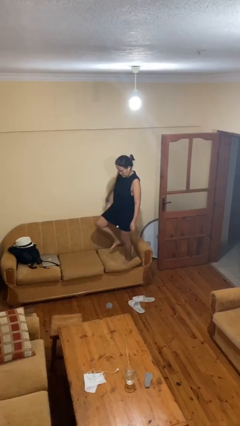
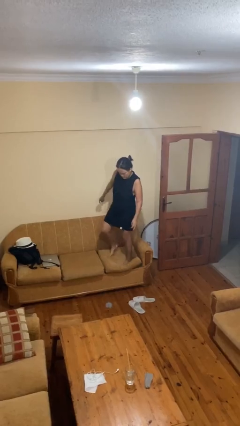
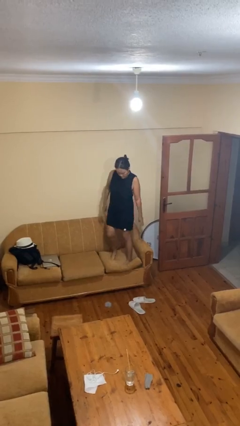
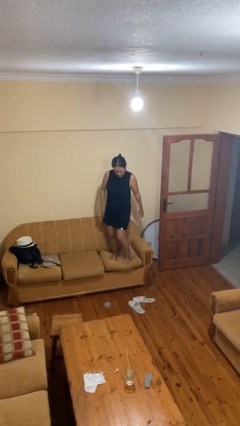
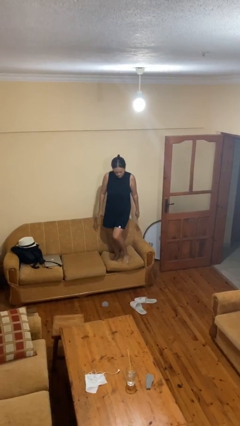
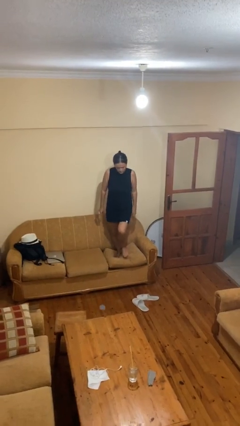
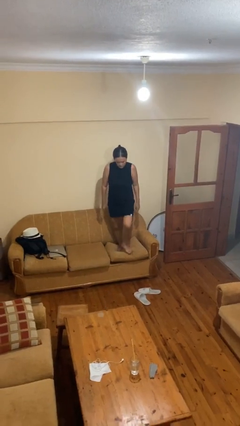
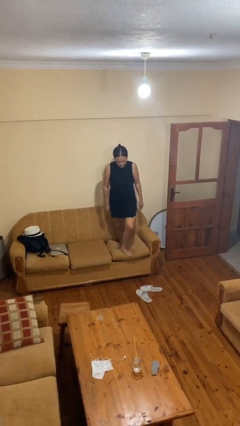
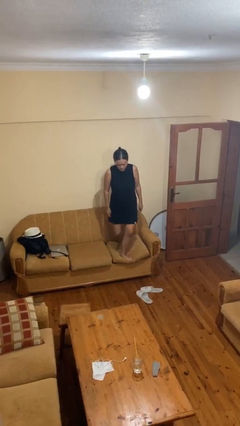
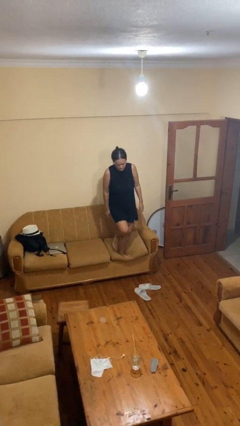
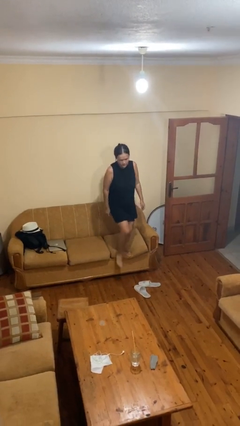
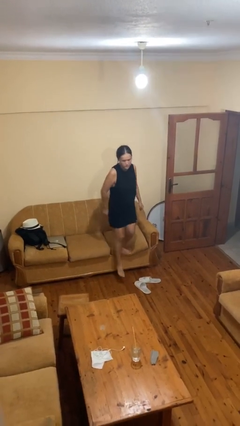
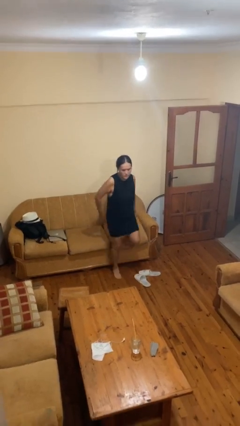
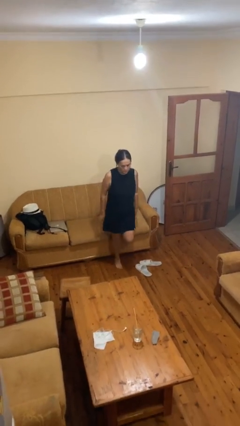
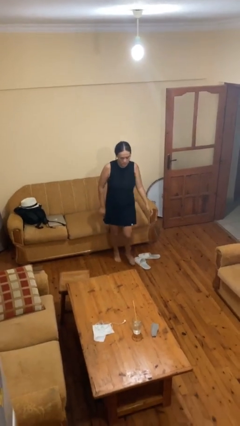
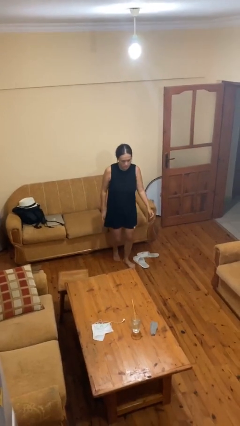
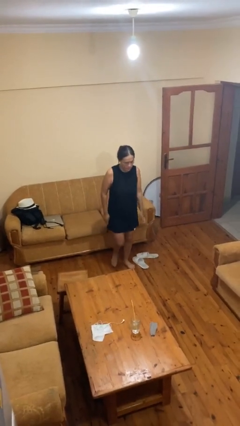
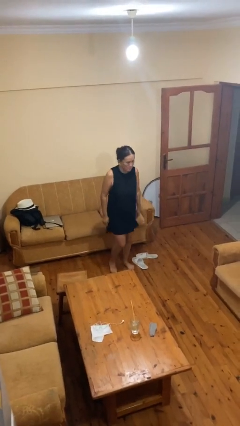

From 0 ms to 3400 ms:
person climbs off couch

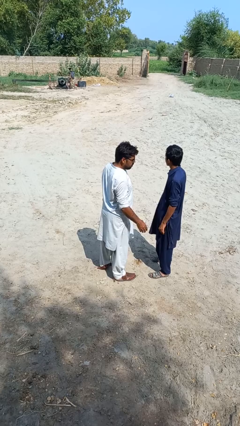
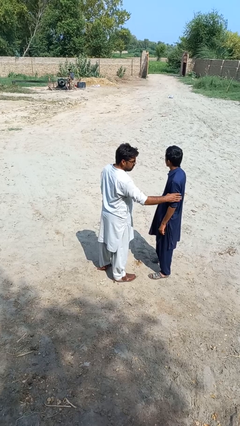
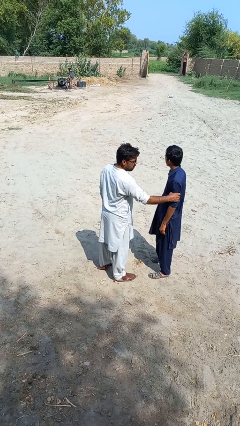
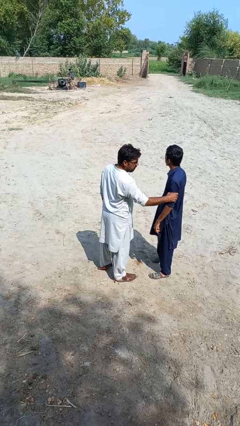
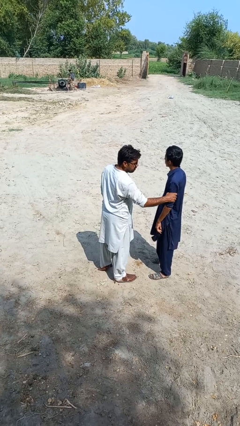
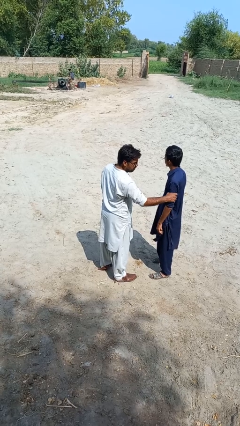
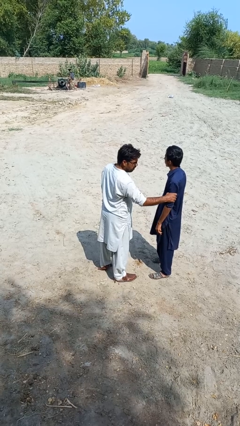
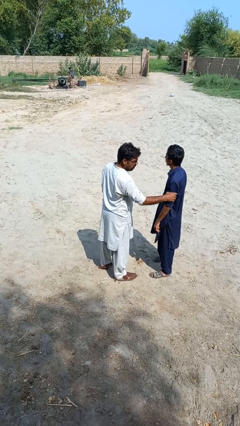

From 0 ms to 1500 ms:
person grabs person by bicep

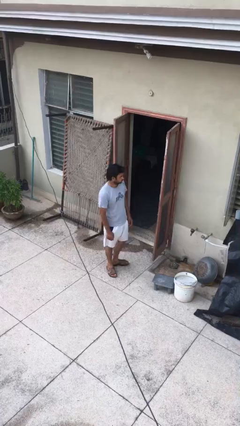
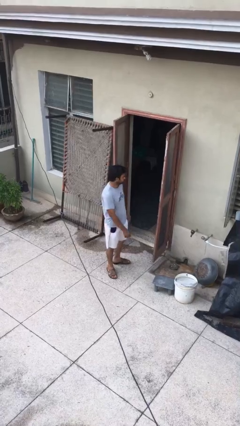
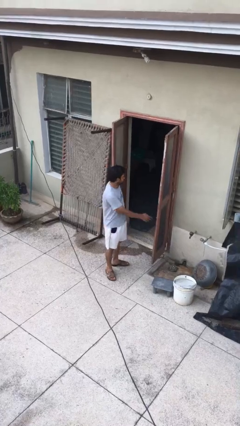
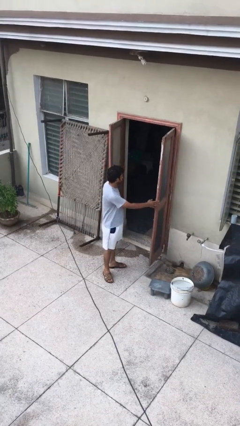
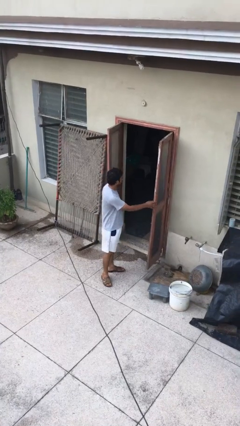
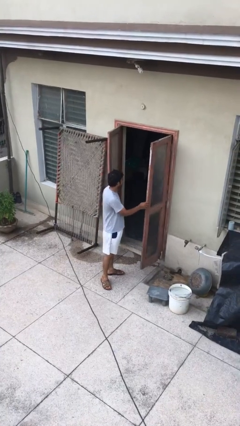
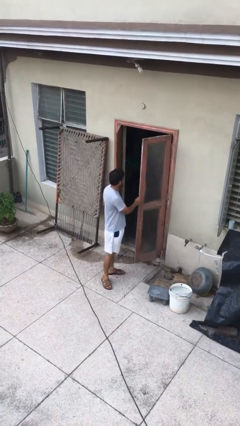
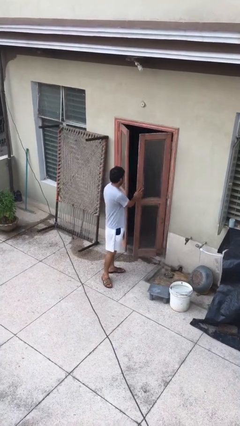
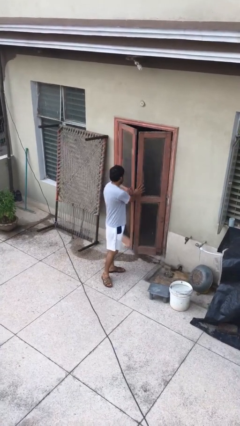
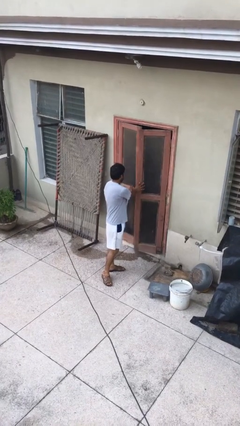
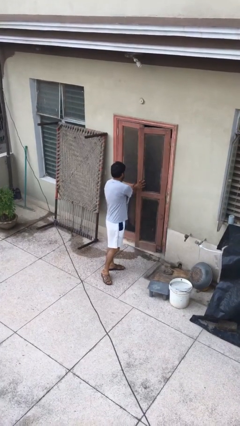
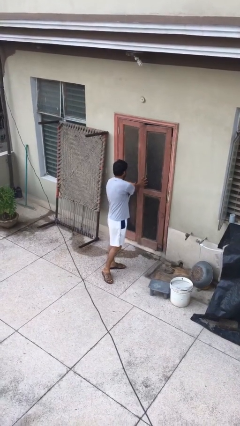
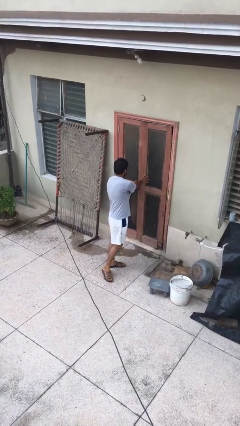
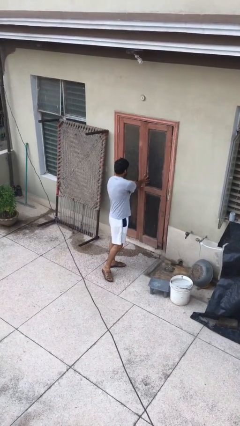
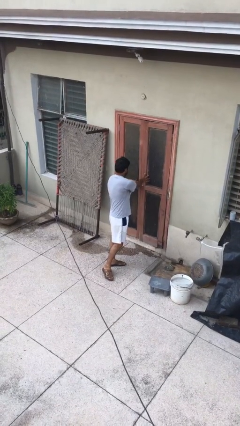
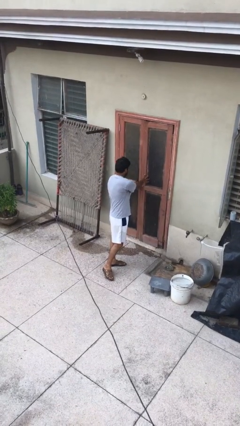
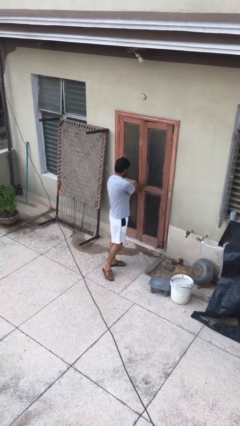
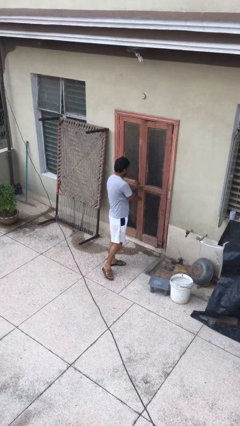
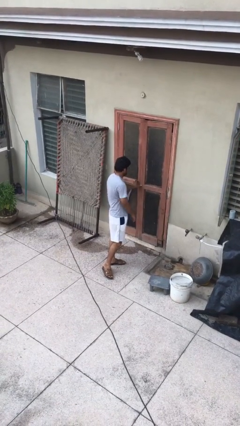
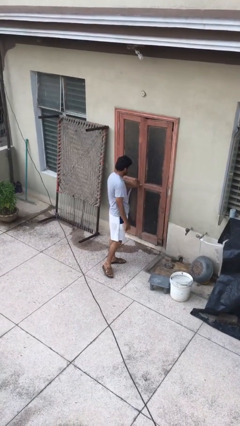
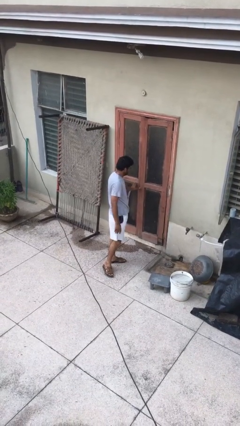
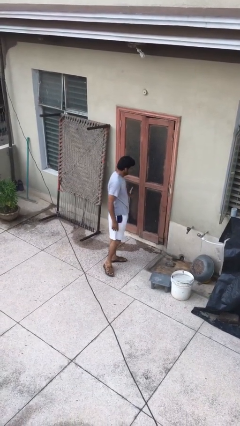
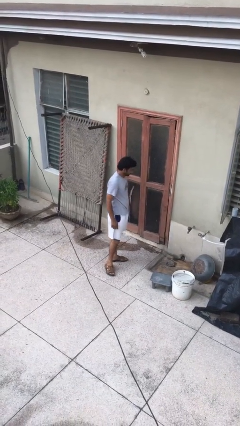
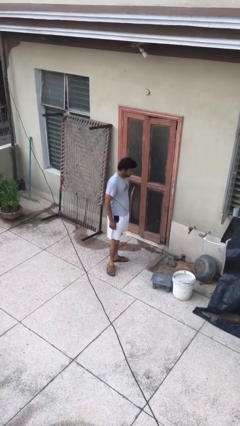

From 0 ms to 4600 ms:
person closes facility door

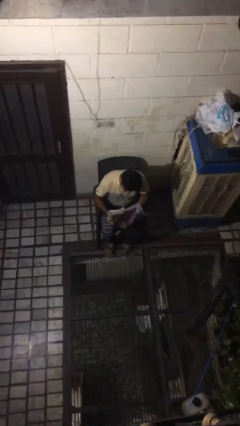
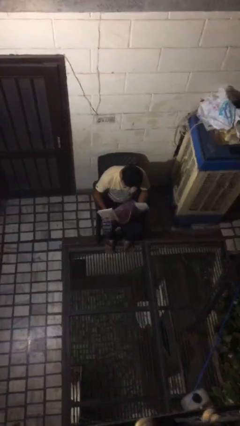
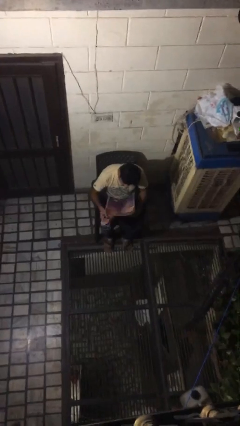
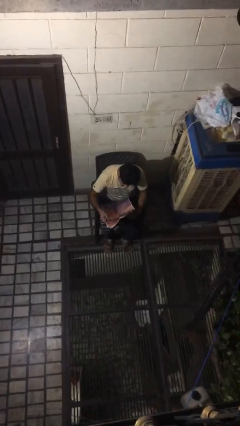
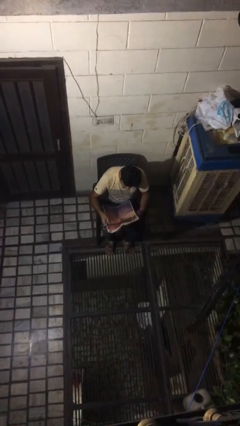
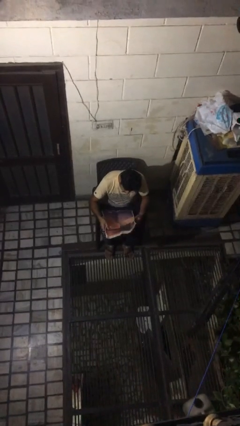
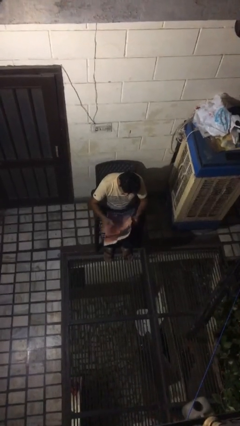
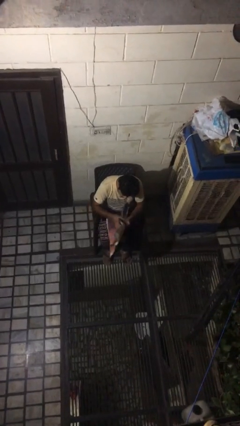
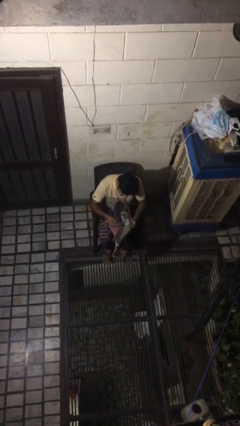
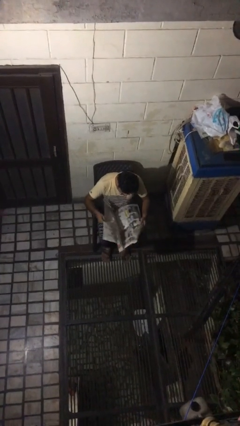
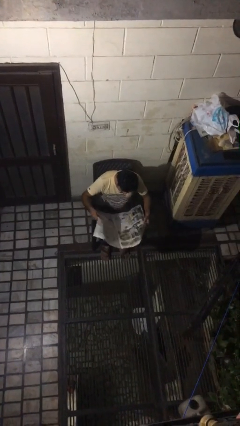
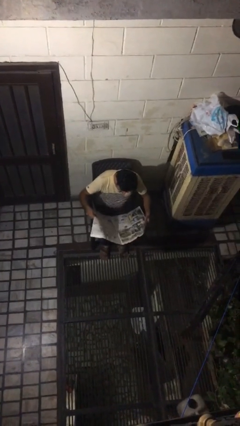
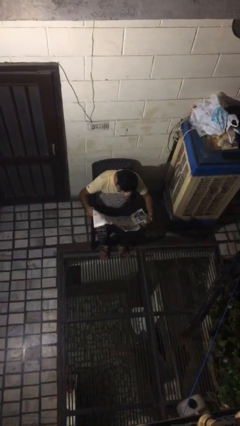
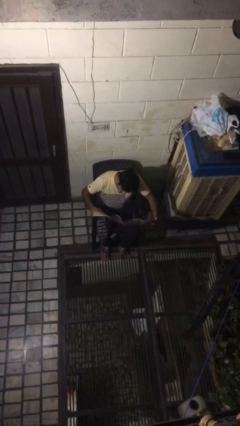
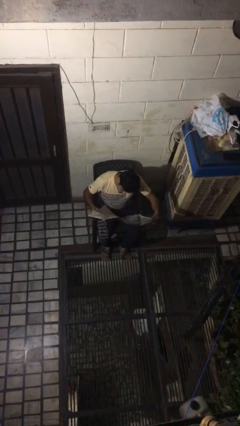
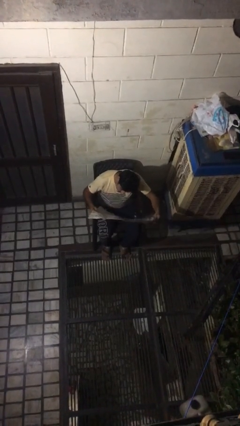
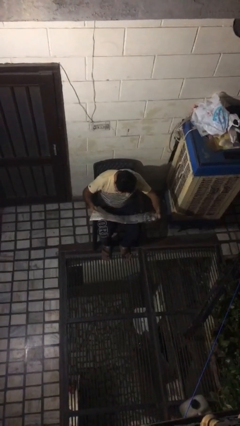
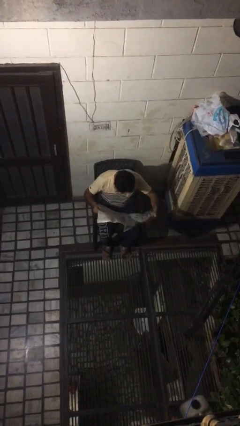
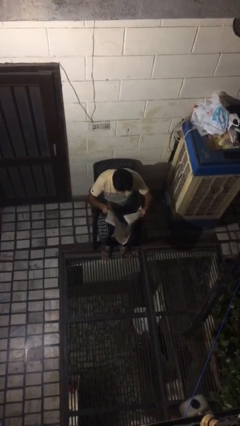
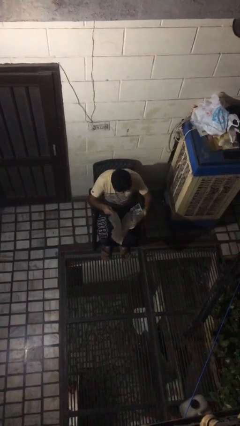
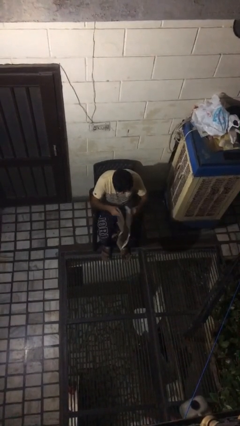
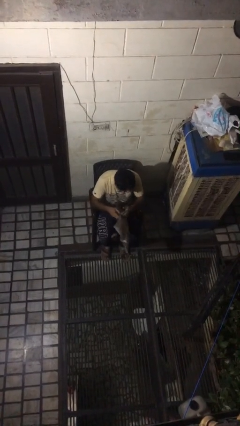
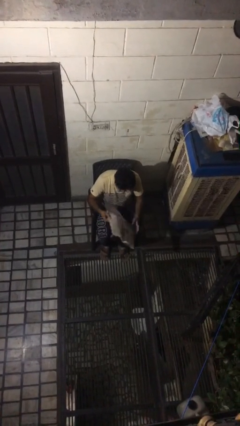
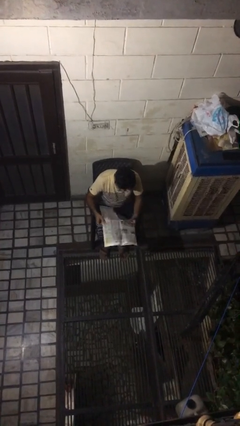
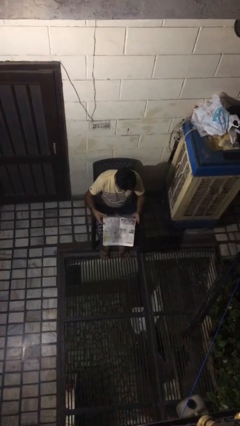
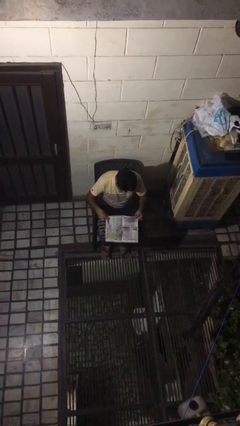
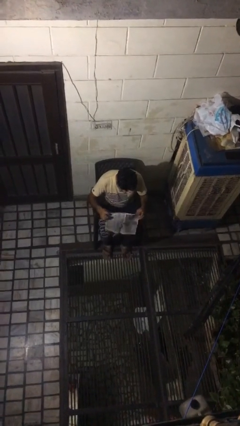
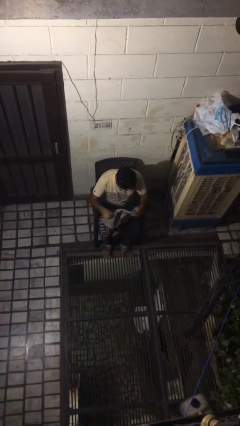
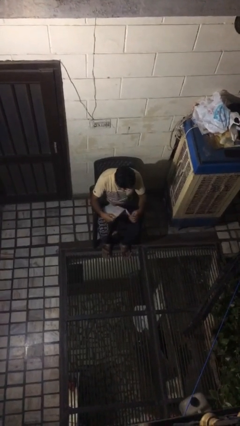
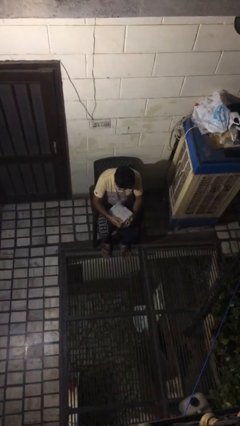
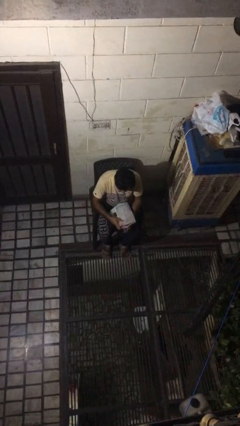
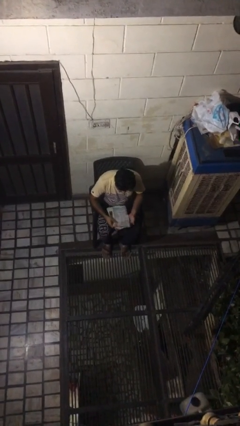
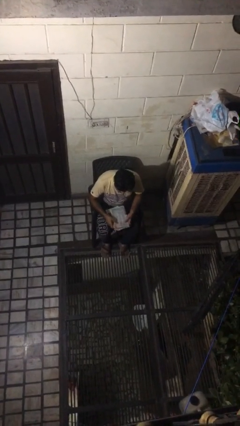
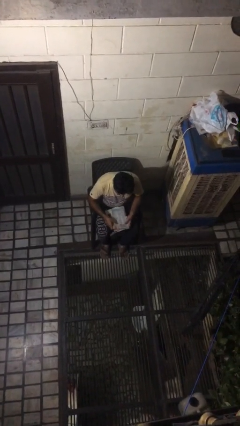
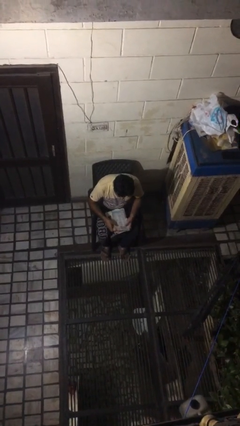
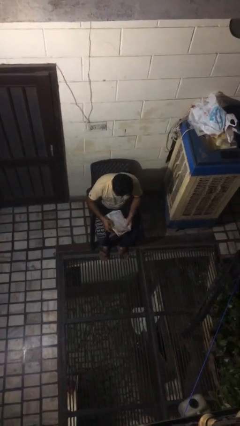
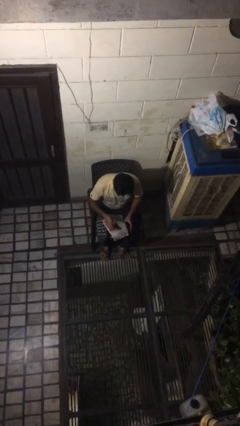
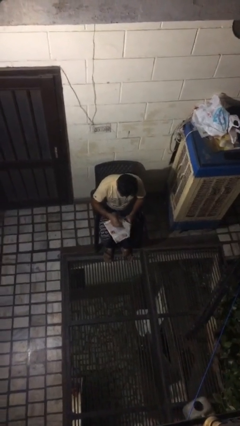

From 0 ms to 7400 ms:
person reads newspaper

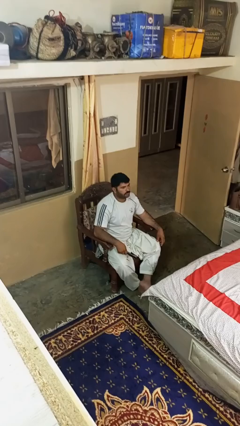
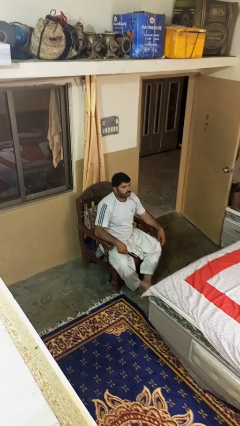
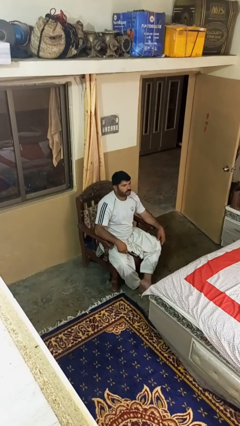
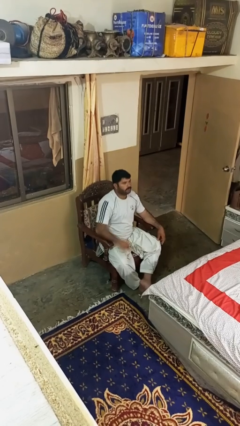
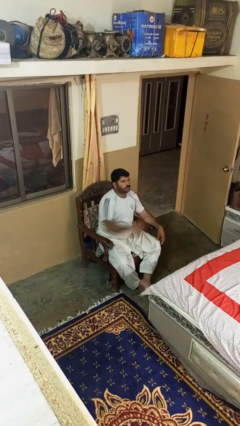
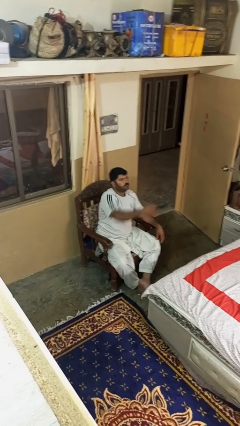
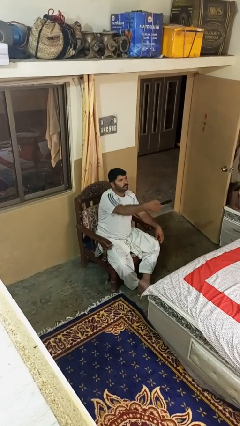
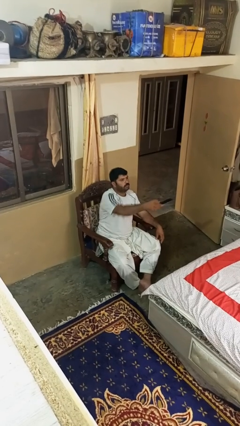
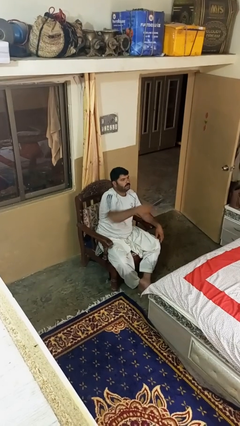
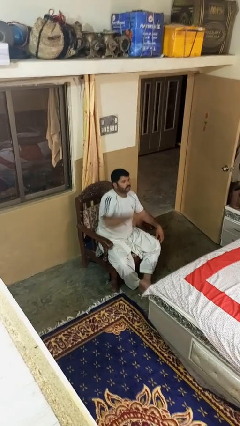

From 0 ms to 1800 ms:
person uses television remote
